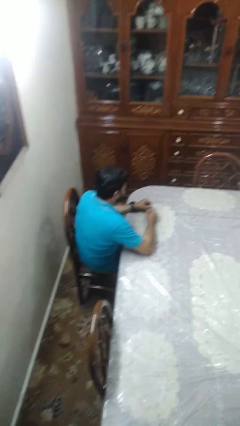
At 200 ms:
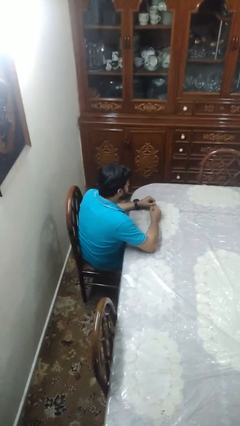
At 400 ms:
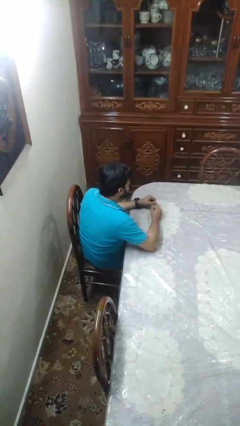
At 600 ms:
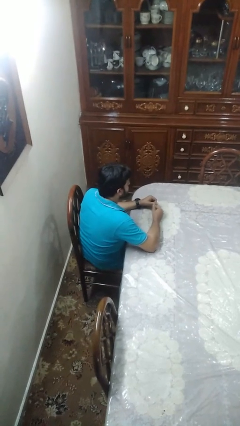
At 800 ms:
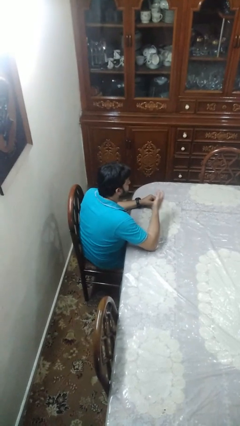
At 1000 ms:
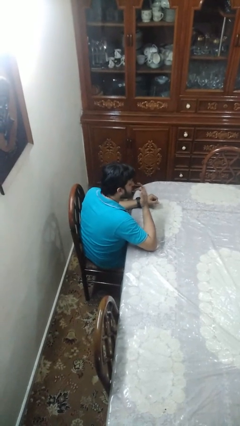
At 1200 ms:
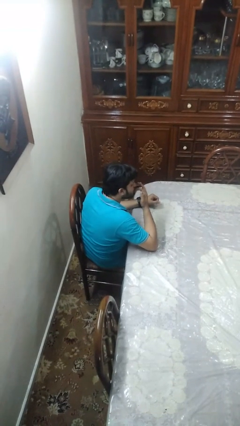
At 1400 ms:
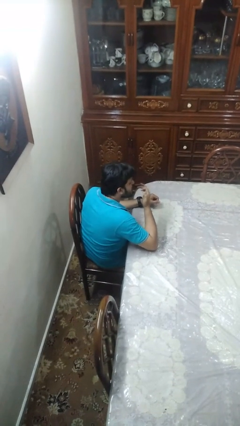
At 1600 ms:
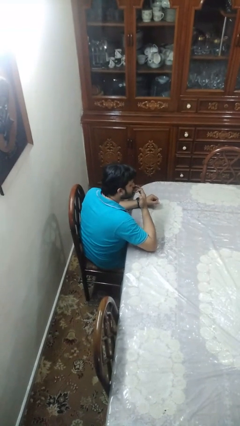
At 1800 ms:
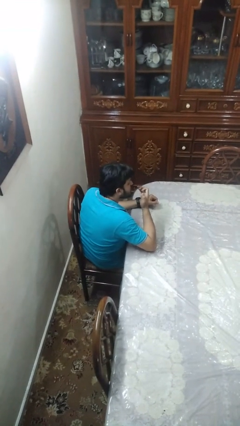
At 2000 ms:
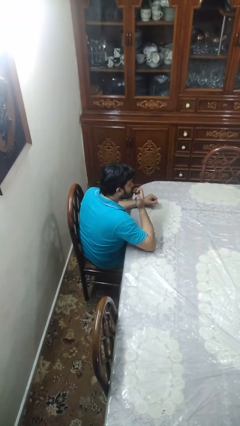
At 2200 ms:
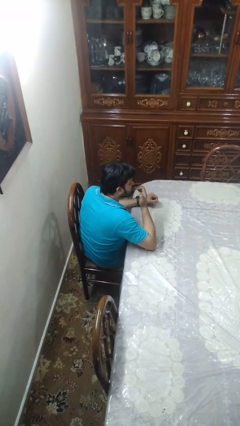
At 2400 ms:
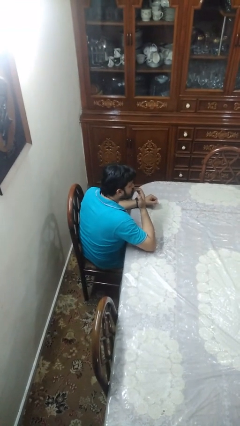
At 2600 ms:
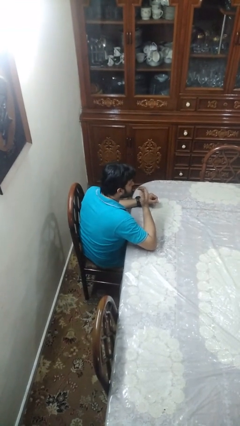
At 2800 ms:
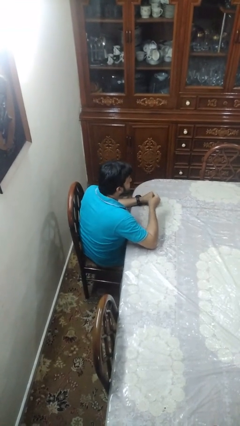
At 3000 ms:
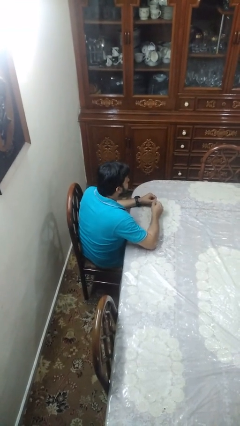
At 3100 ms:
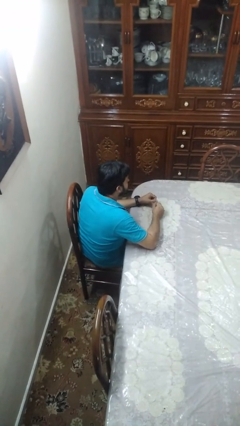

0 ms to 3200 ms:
person licks fingers

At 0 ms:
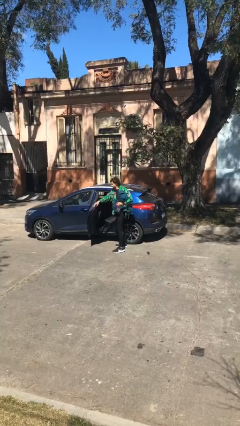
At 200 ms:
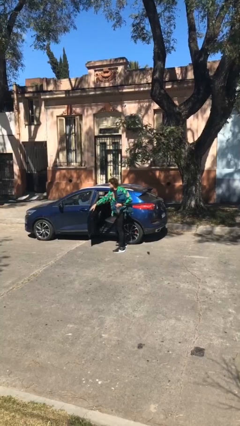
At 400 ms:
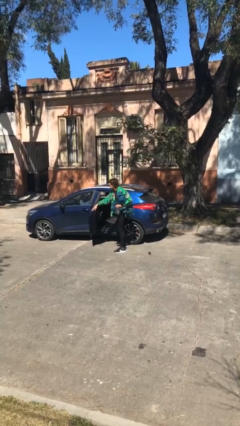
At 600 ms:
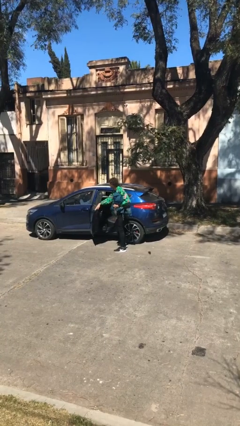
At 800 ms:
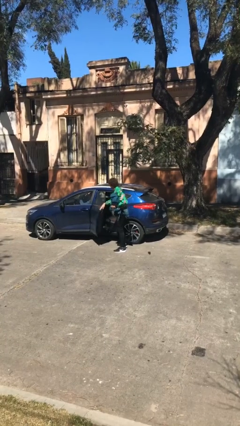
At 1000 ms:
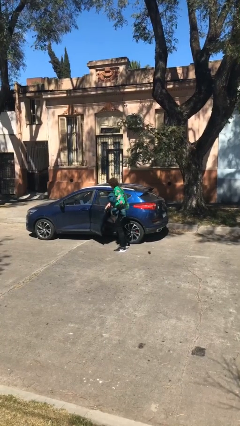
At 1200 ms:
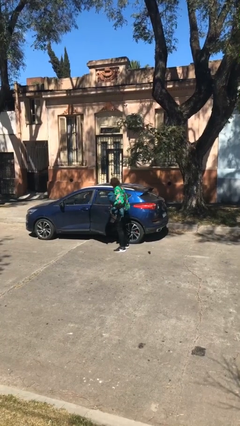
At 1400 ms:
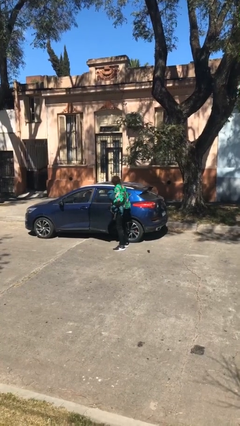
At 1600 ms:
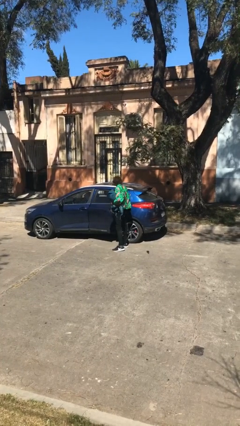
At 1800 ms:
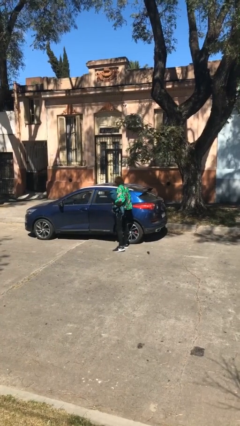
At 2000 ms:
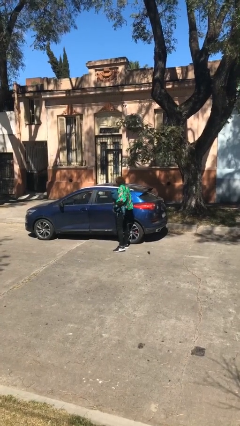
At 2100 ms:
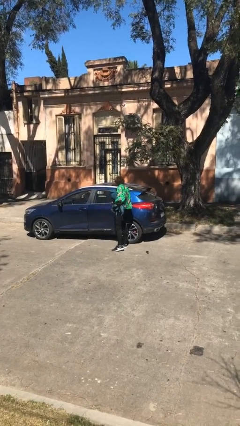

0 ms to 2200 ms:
person closes car door

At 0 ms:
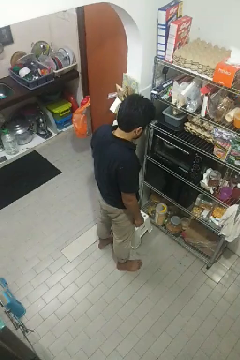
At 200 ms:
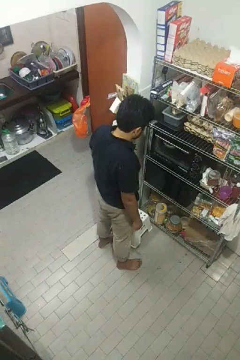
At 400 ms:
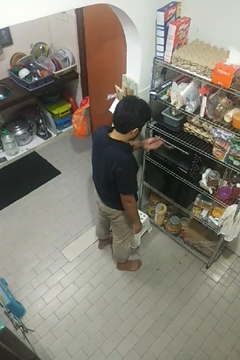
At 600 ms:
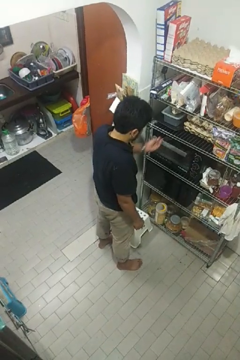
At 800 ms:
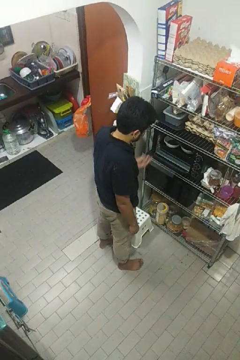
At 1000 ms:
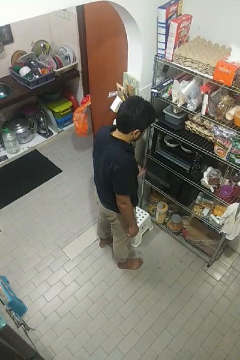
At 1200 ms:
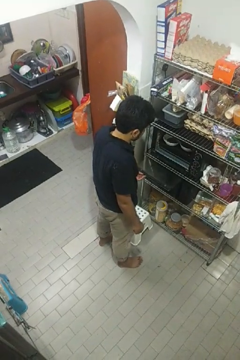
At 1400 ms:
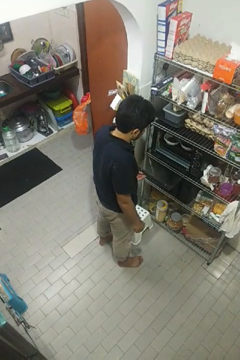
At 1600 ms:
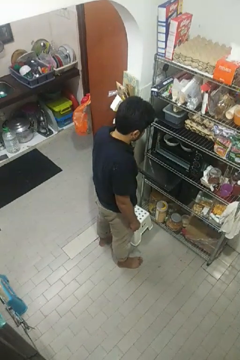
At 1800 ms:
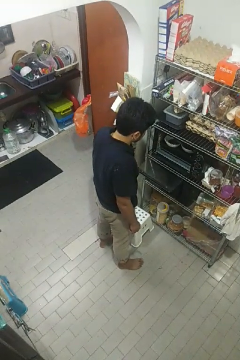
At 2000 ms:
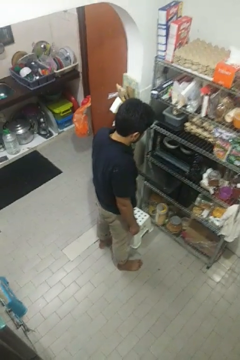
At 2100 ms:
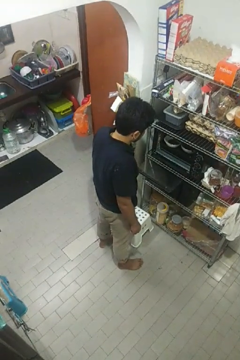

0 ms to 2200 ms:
person opens oven door

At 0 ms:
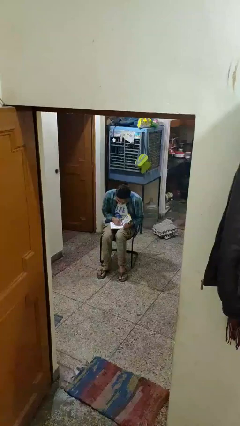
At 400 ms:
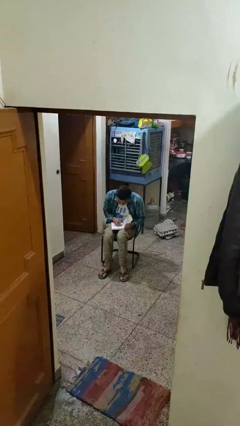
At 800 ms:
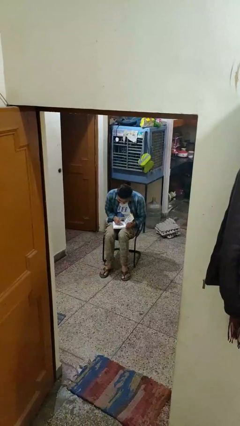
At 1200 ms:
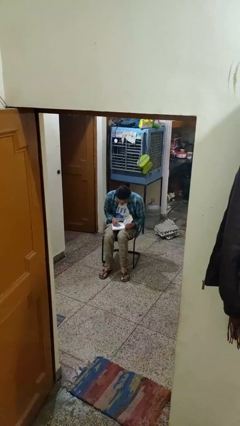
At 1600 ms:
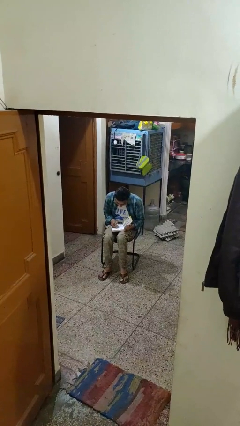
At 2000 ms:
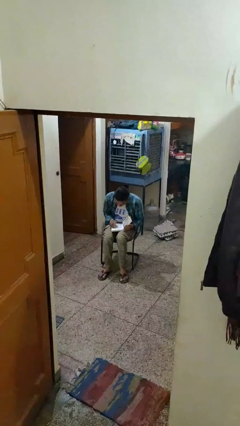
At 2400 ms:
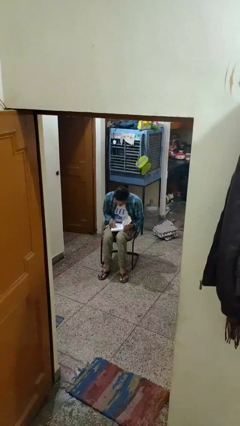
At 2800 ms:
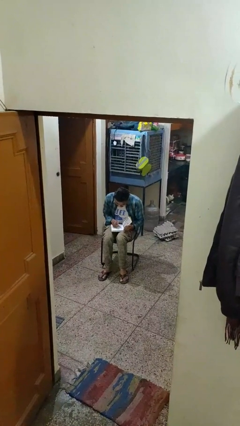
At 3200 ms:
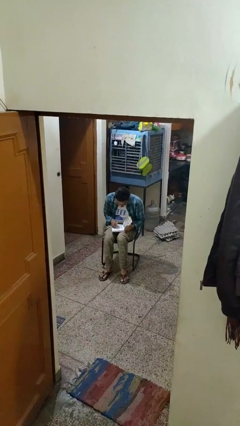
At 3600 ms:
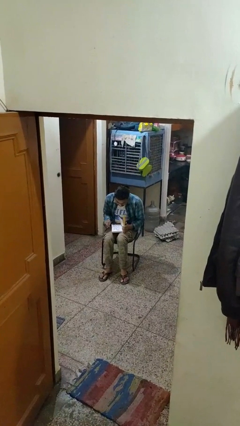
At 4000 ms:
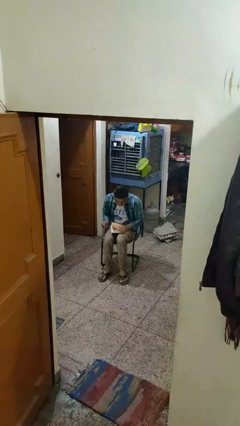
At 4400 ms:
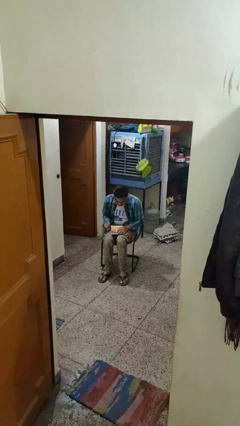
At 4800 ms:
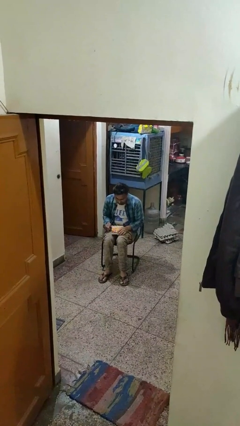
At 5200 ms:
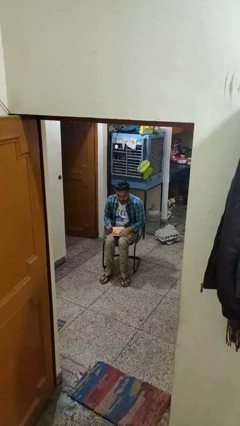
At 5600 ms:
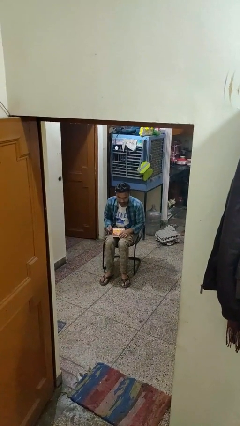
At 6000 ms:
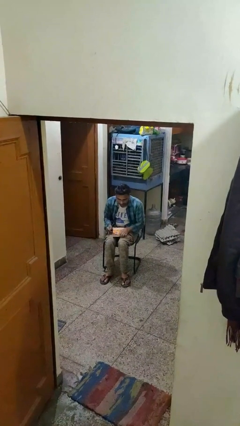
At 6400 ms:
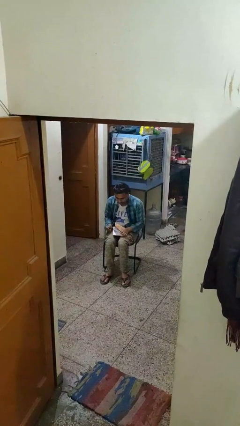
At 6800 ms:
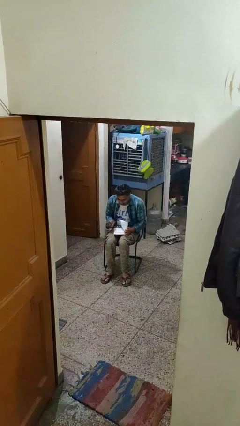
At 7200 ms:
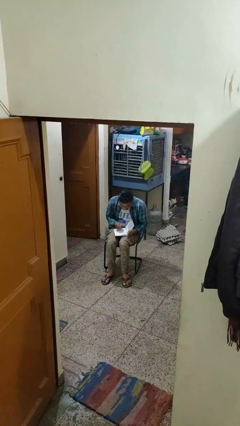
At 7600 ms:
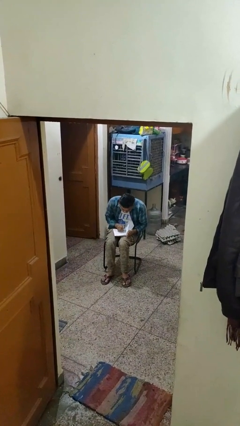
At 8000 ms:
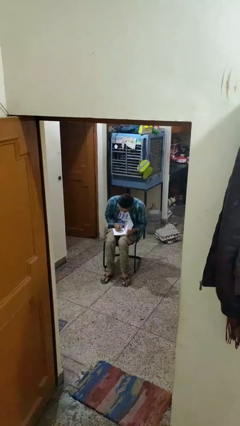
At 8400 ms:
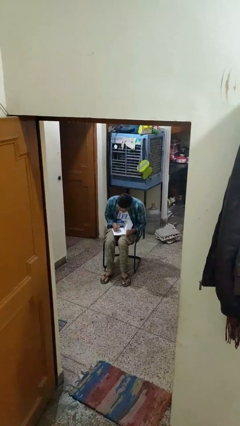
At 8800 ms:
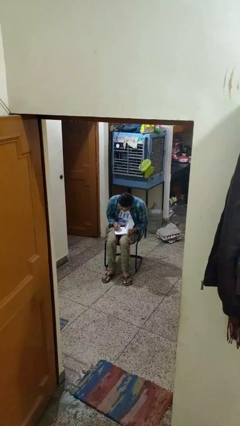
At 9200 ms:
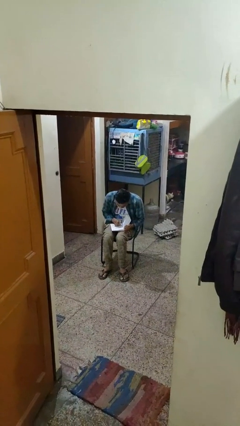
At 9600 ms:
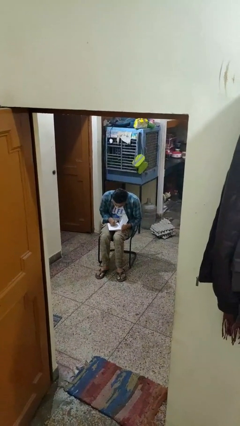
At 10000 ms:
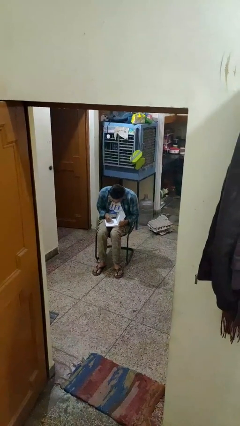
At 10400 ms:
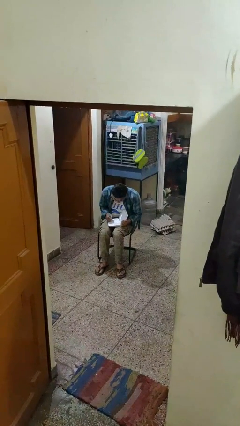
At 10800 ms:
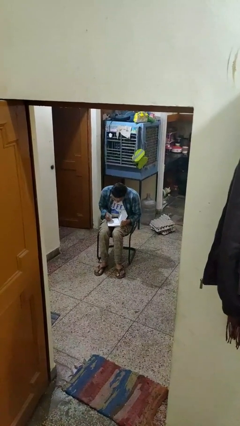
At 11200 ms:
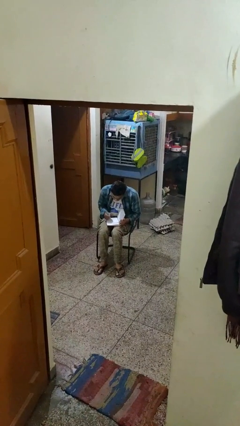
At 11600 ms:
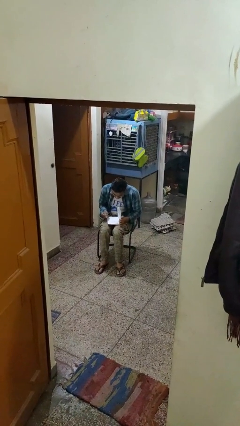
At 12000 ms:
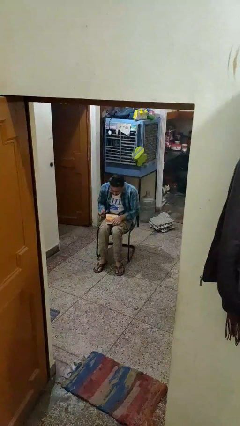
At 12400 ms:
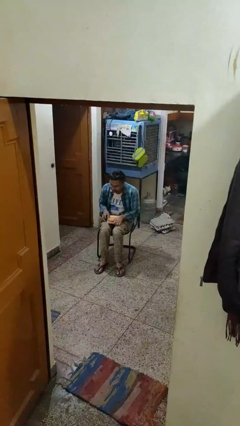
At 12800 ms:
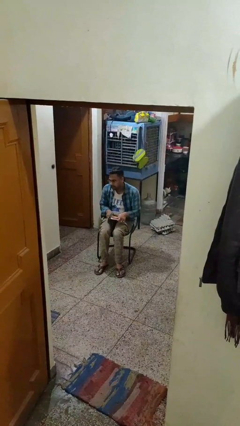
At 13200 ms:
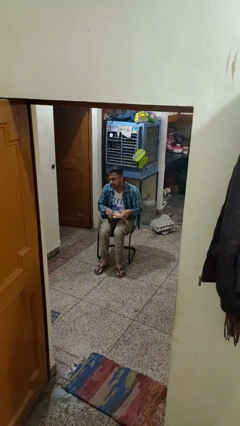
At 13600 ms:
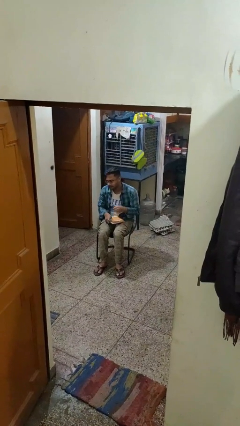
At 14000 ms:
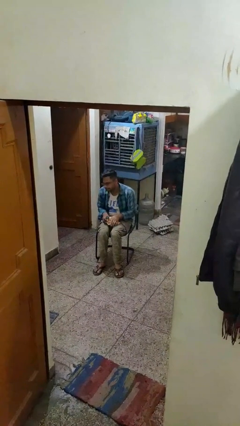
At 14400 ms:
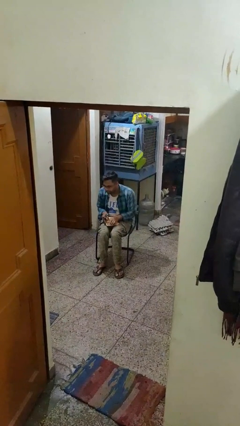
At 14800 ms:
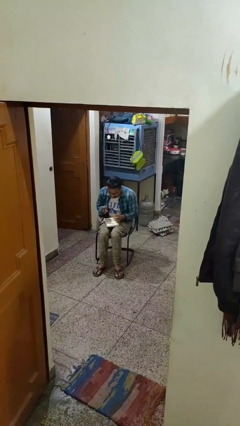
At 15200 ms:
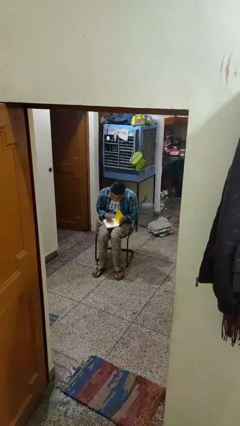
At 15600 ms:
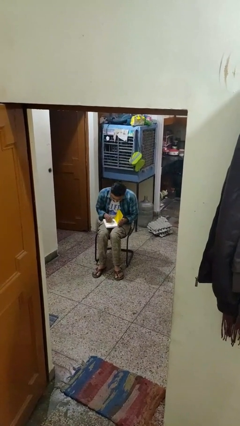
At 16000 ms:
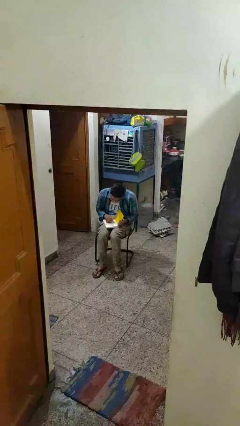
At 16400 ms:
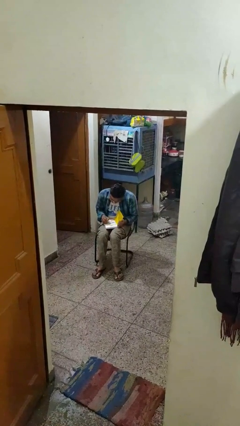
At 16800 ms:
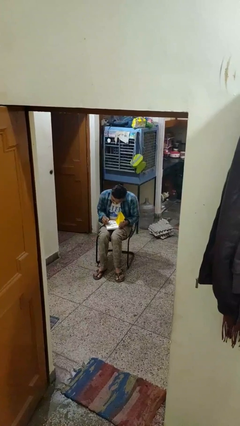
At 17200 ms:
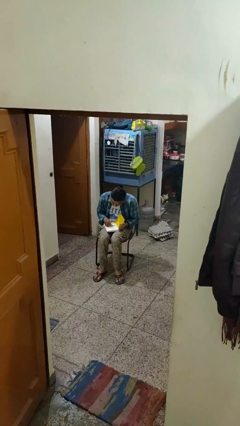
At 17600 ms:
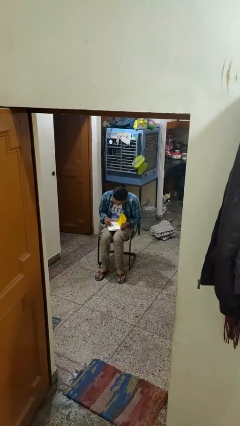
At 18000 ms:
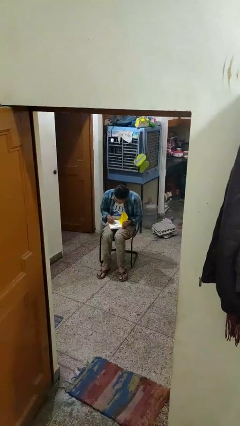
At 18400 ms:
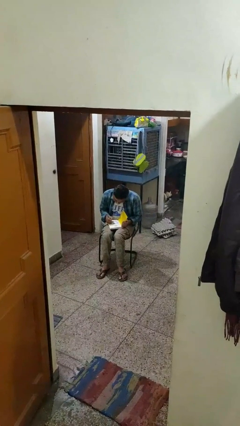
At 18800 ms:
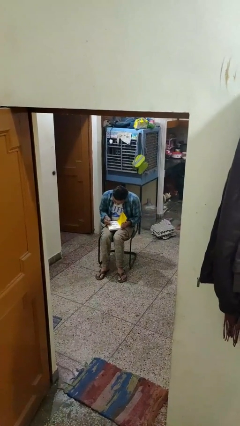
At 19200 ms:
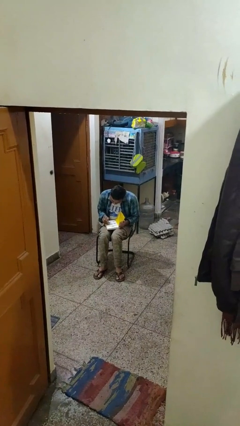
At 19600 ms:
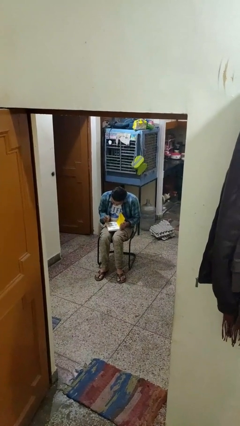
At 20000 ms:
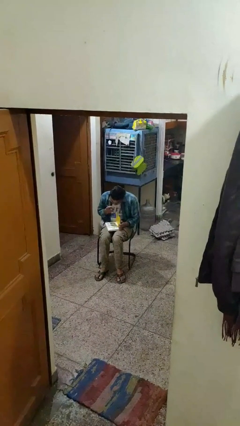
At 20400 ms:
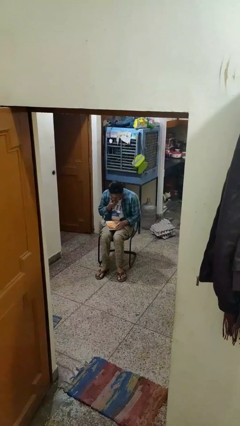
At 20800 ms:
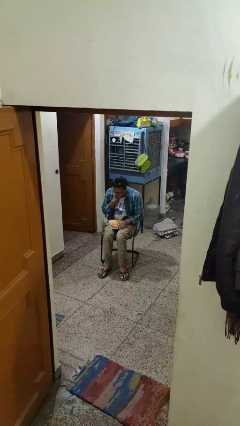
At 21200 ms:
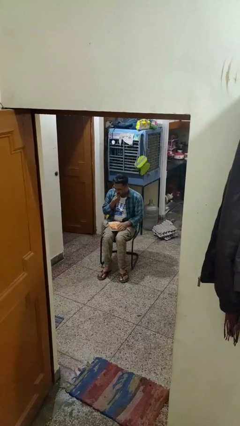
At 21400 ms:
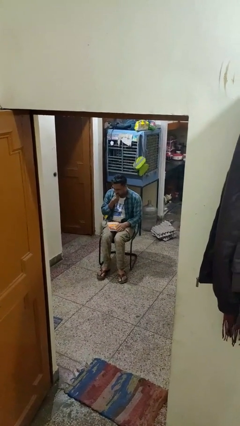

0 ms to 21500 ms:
person reads document
